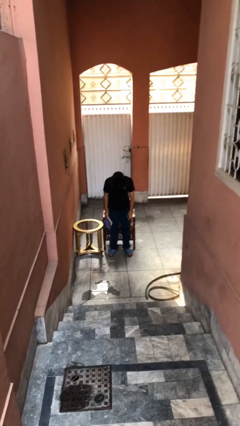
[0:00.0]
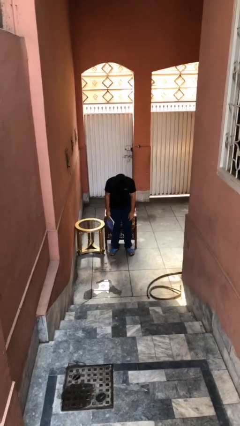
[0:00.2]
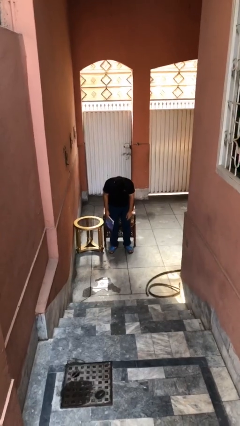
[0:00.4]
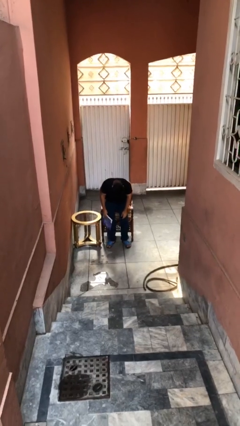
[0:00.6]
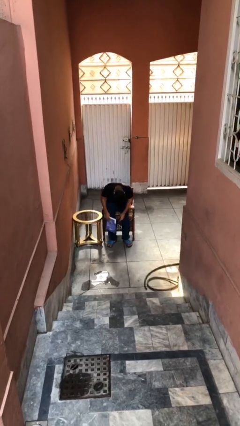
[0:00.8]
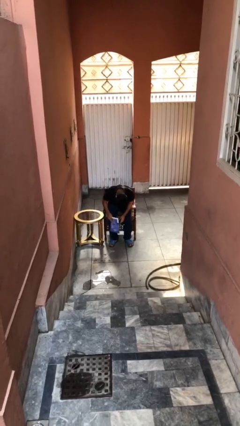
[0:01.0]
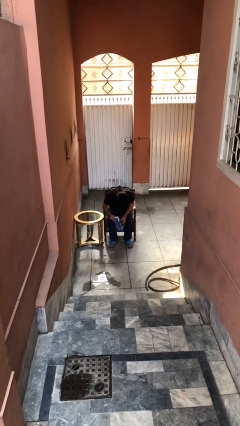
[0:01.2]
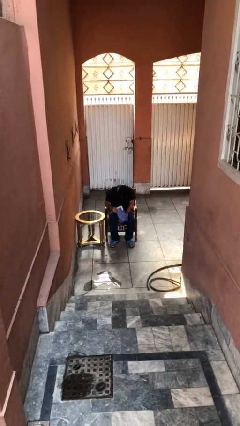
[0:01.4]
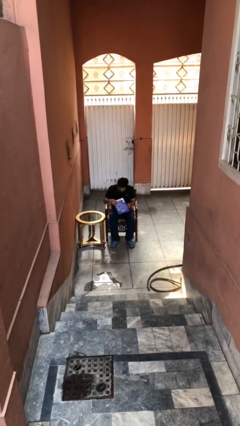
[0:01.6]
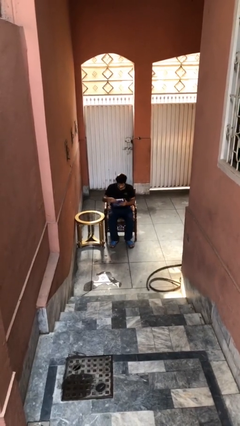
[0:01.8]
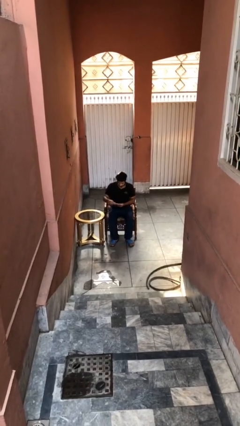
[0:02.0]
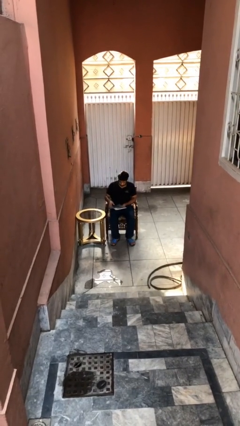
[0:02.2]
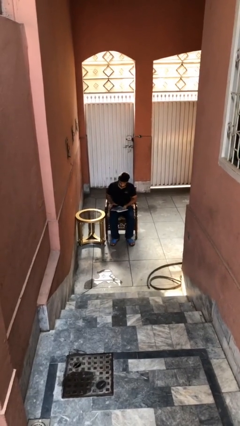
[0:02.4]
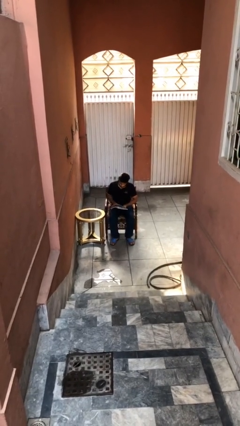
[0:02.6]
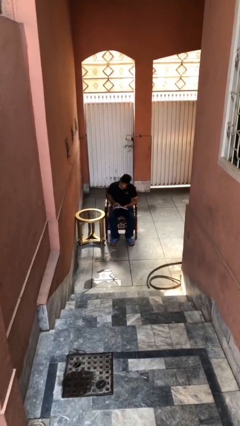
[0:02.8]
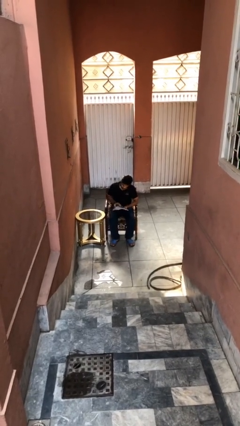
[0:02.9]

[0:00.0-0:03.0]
person sits down

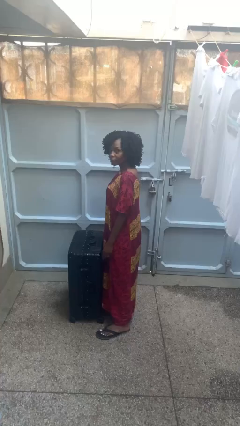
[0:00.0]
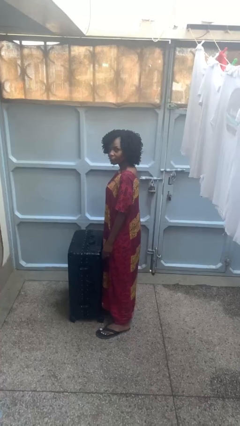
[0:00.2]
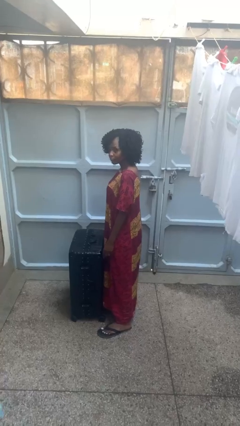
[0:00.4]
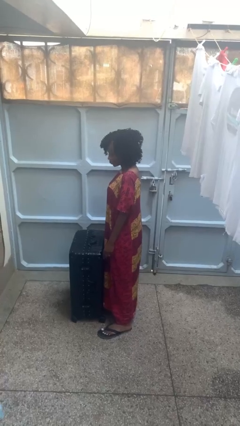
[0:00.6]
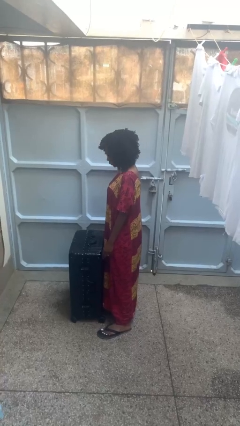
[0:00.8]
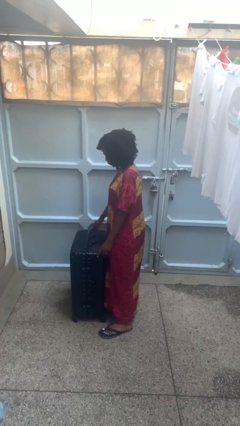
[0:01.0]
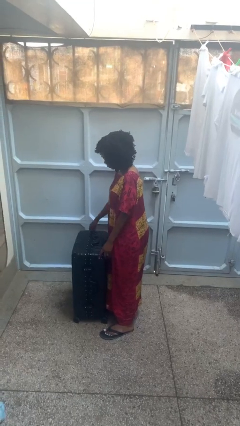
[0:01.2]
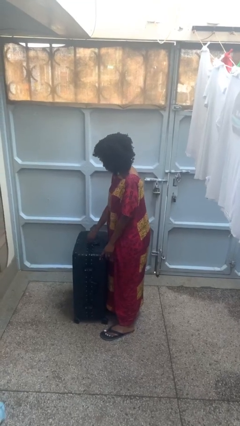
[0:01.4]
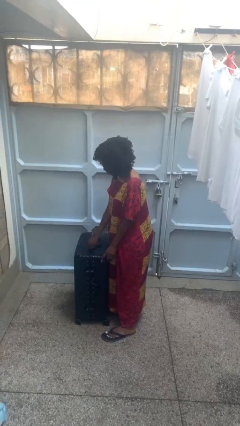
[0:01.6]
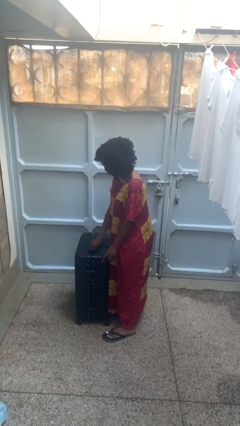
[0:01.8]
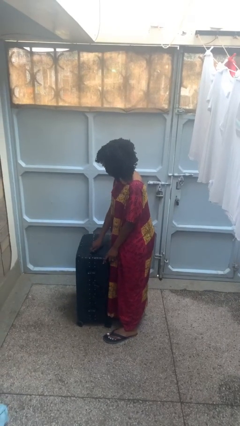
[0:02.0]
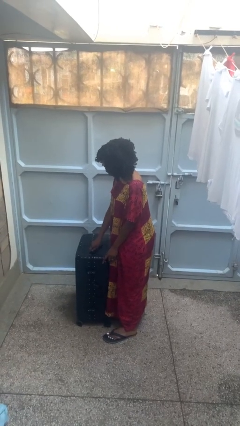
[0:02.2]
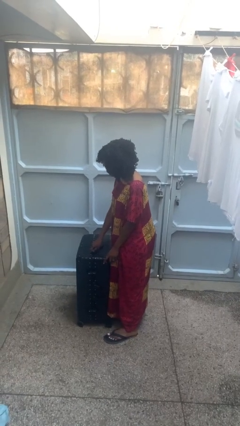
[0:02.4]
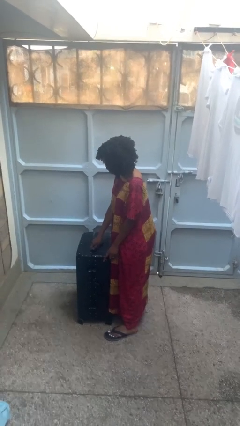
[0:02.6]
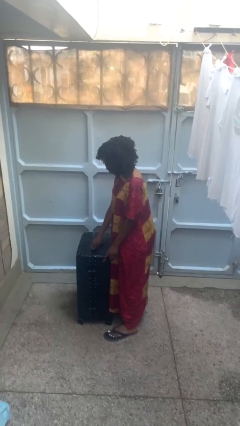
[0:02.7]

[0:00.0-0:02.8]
person opens suitcase

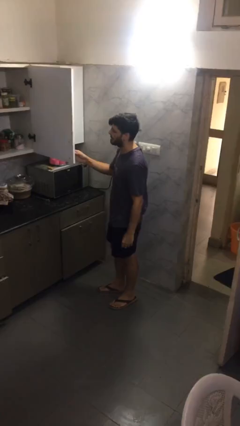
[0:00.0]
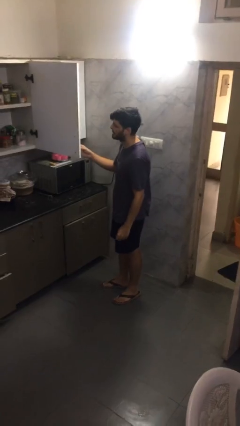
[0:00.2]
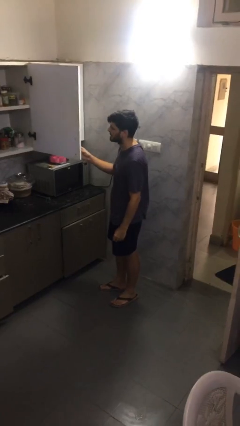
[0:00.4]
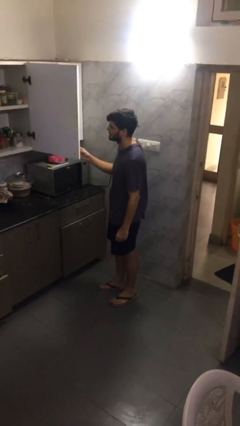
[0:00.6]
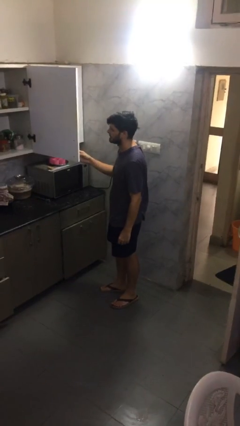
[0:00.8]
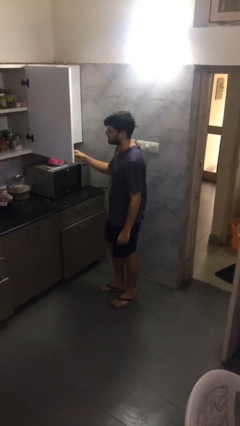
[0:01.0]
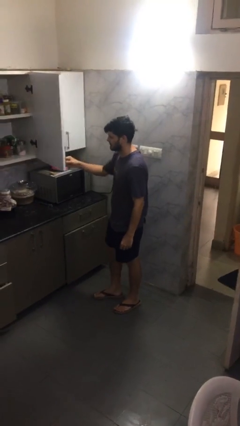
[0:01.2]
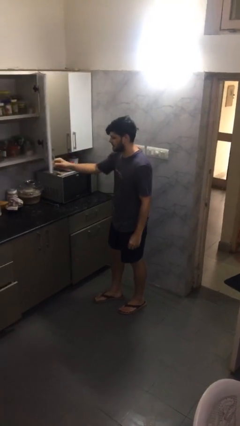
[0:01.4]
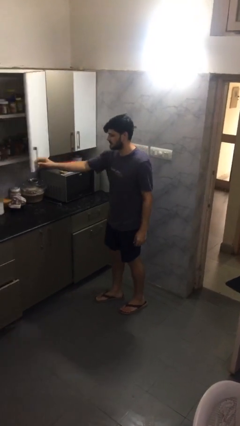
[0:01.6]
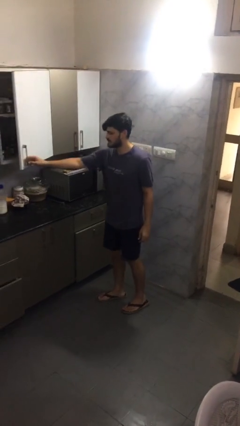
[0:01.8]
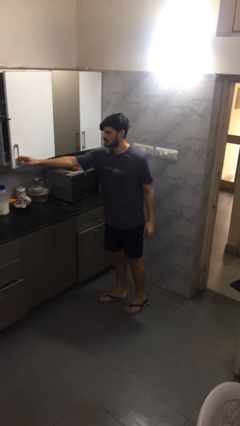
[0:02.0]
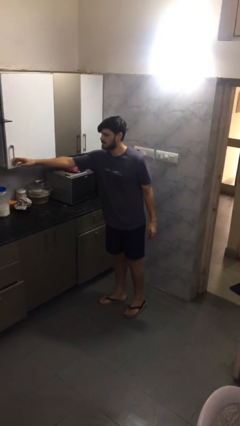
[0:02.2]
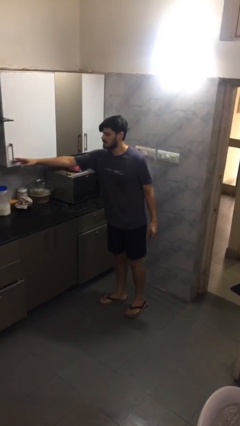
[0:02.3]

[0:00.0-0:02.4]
person closes cabinet

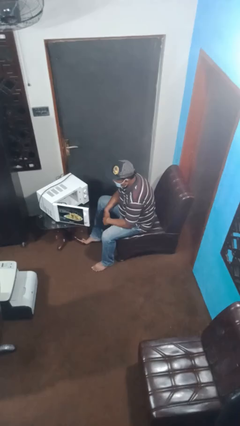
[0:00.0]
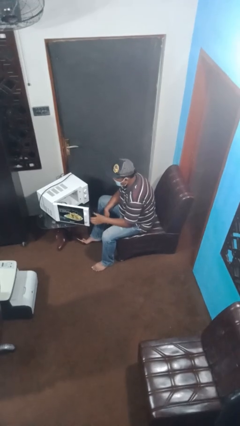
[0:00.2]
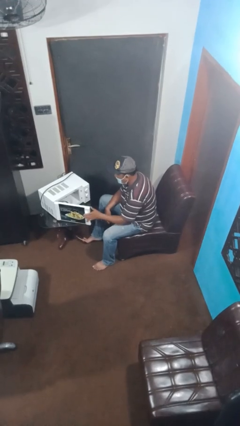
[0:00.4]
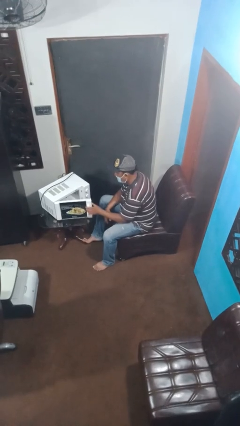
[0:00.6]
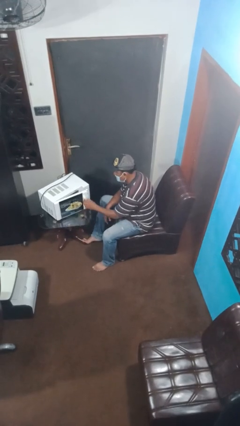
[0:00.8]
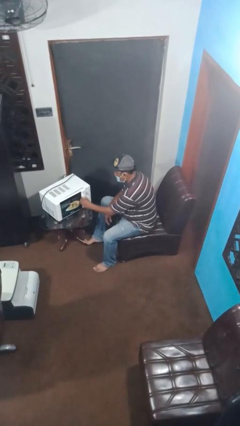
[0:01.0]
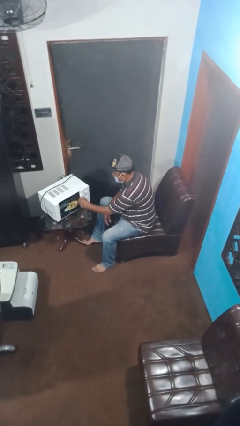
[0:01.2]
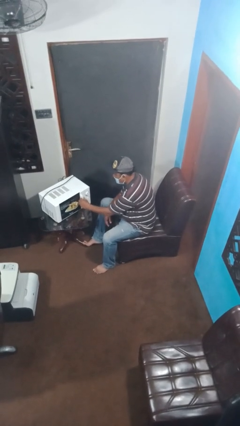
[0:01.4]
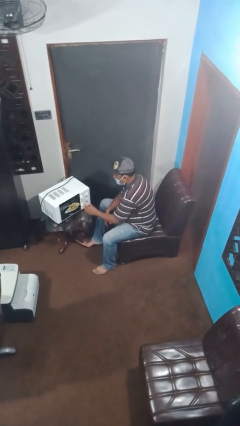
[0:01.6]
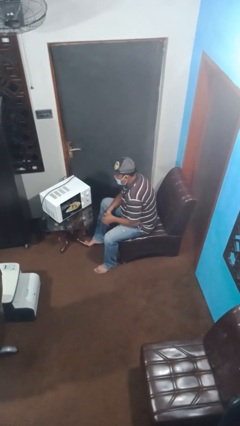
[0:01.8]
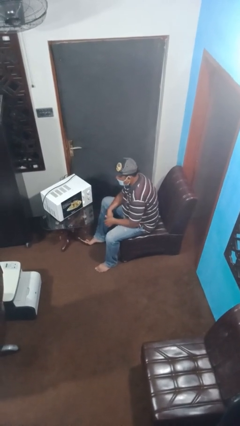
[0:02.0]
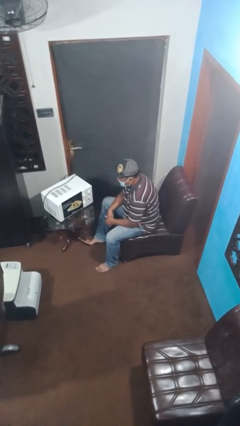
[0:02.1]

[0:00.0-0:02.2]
person closes microwave

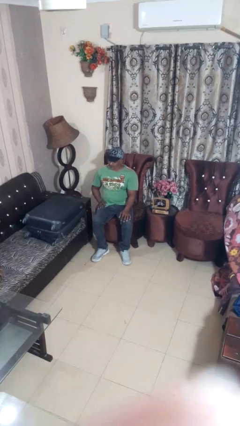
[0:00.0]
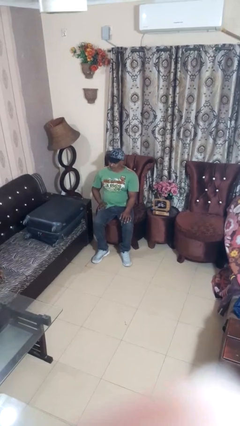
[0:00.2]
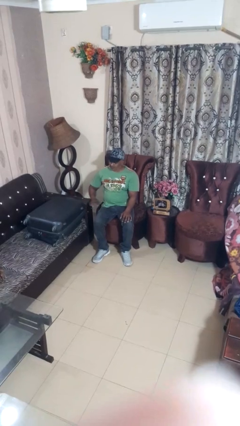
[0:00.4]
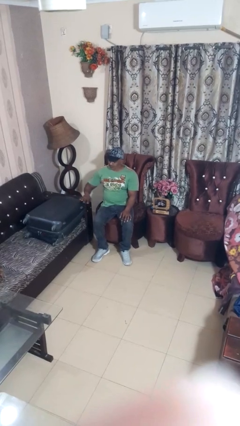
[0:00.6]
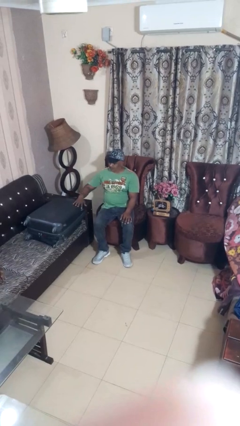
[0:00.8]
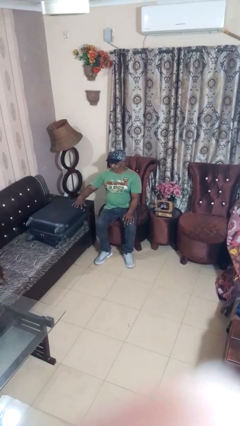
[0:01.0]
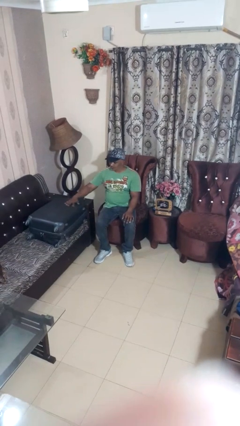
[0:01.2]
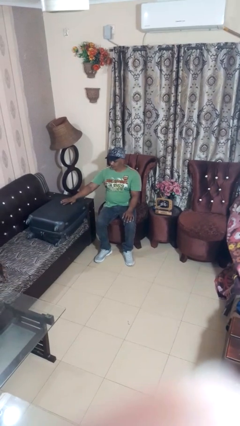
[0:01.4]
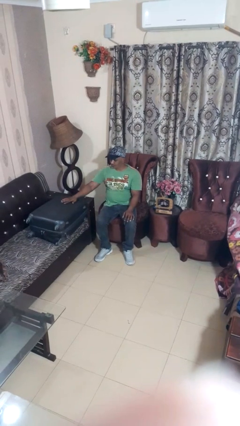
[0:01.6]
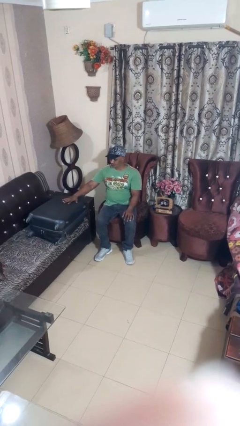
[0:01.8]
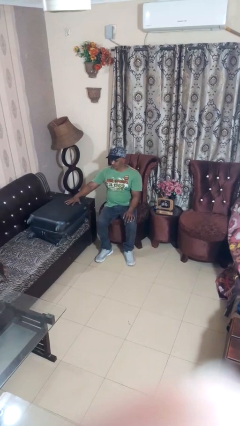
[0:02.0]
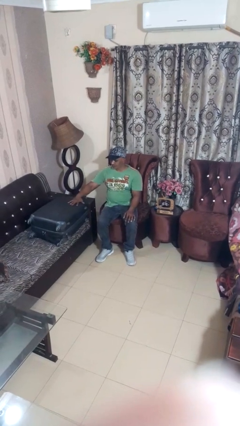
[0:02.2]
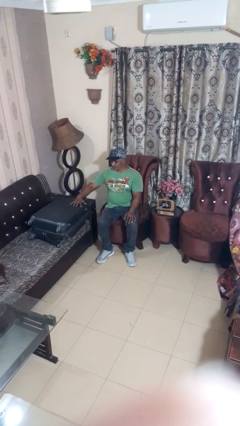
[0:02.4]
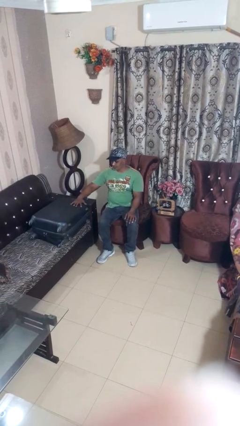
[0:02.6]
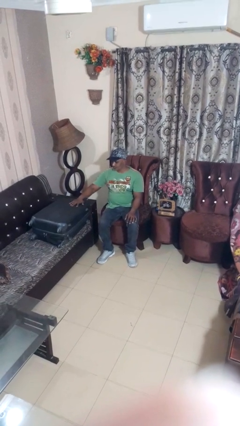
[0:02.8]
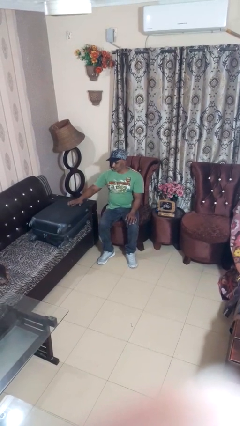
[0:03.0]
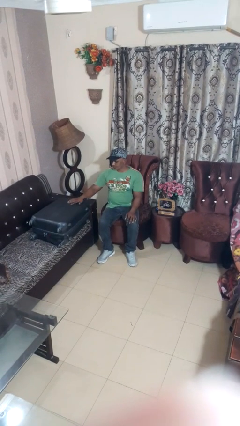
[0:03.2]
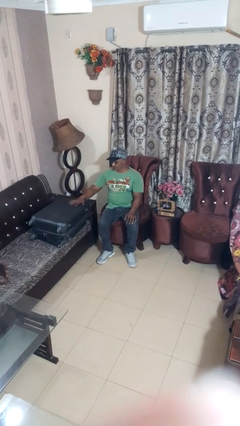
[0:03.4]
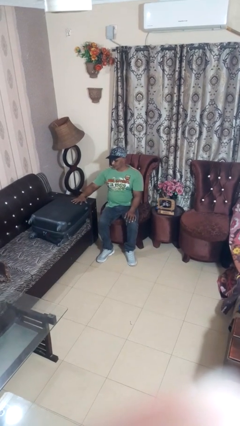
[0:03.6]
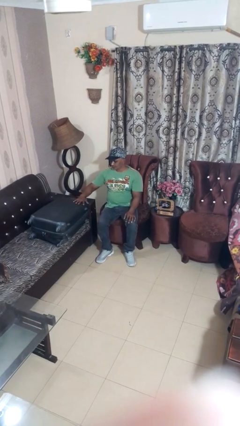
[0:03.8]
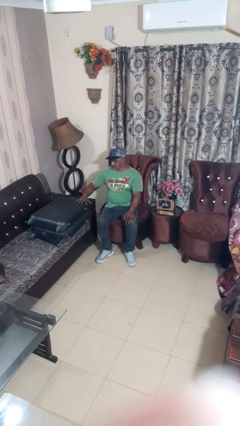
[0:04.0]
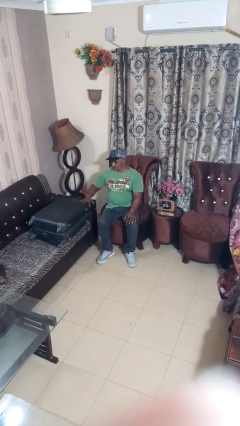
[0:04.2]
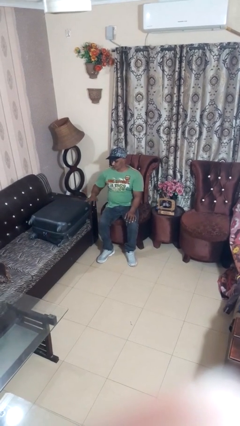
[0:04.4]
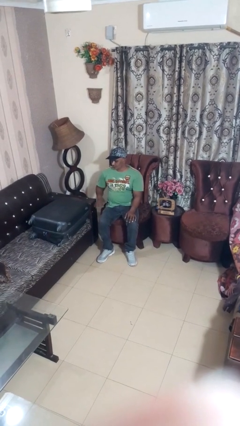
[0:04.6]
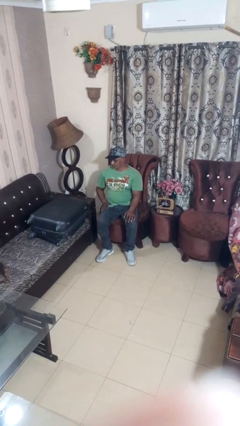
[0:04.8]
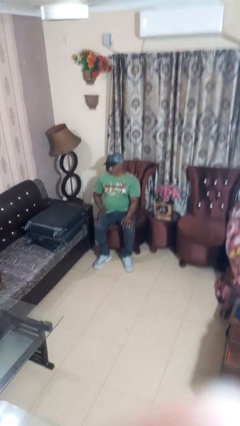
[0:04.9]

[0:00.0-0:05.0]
person waves hand over object

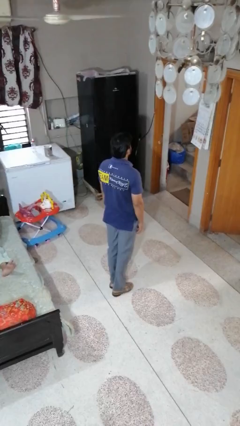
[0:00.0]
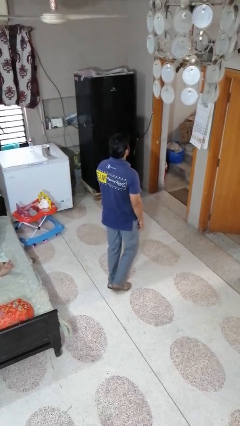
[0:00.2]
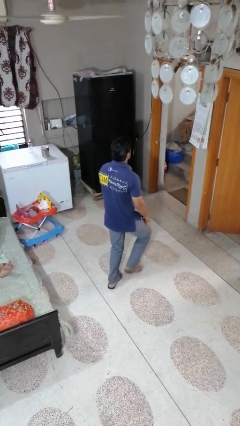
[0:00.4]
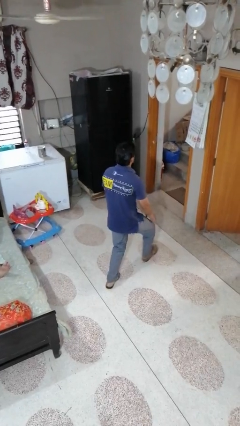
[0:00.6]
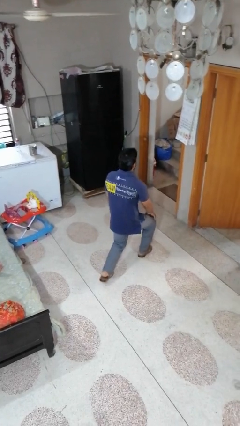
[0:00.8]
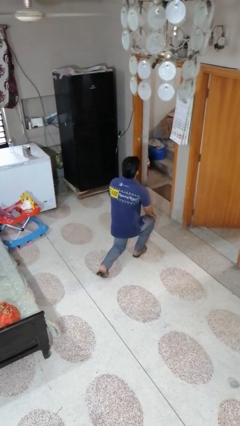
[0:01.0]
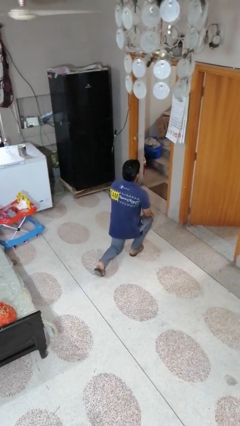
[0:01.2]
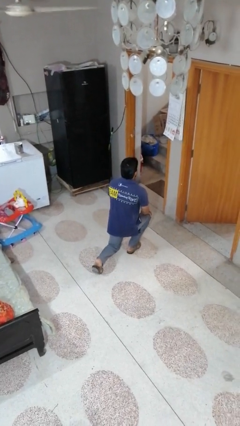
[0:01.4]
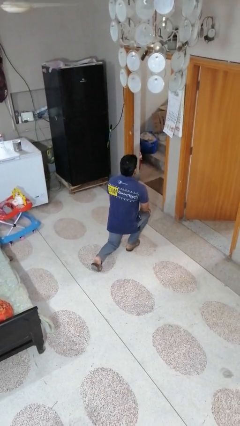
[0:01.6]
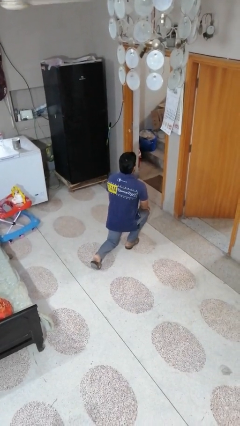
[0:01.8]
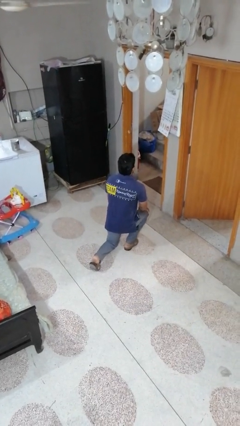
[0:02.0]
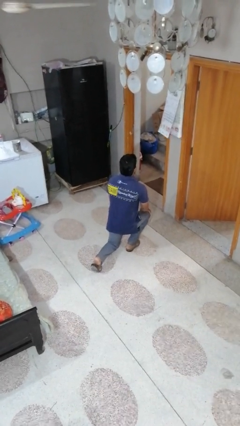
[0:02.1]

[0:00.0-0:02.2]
person kneels
